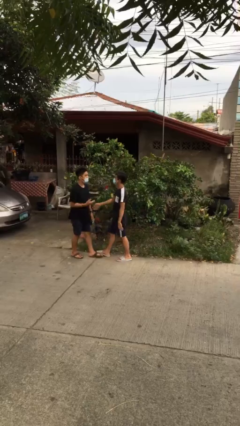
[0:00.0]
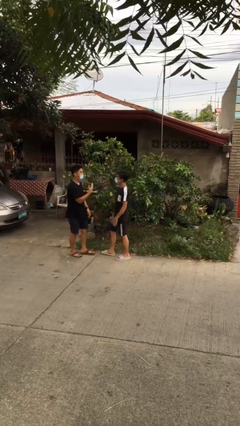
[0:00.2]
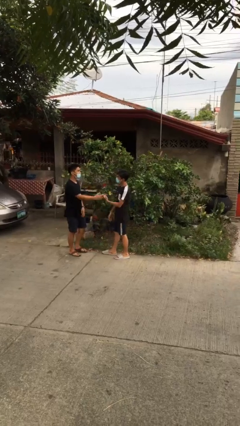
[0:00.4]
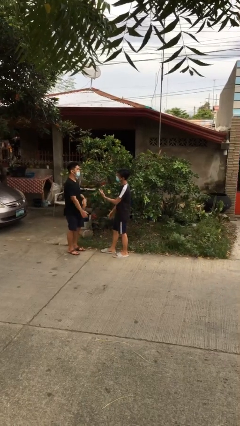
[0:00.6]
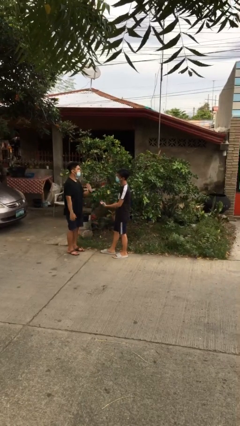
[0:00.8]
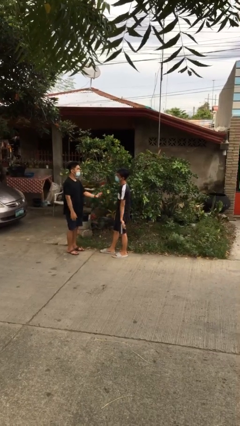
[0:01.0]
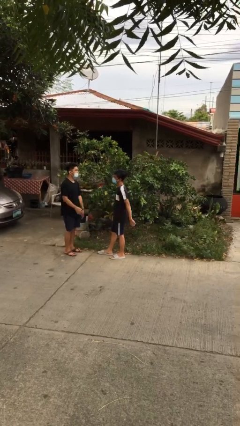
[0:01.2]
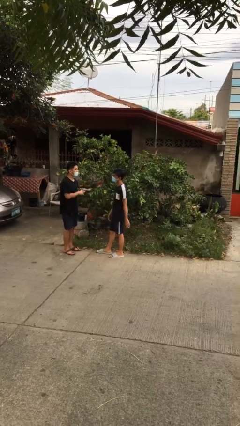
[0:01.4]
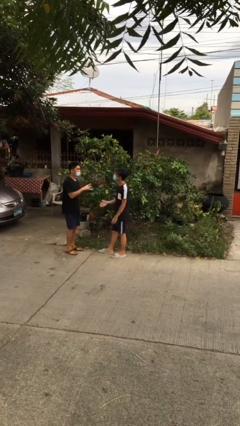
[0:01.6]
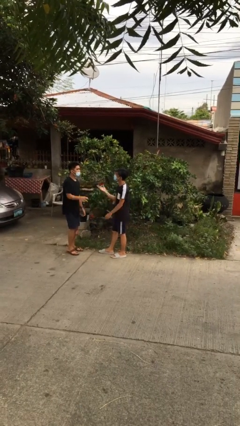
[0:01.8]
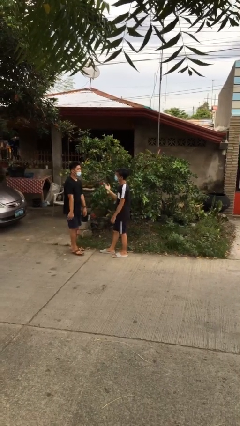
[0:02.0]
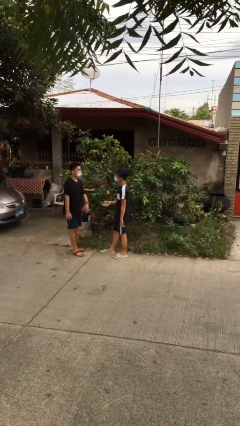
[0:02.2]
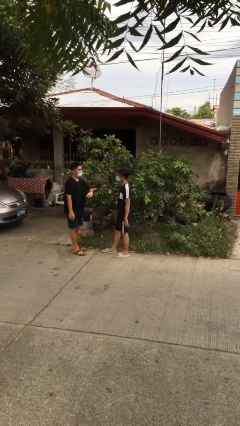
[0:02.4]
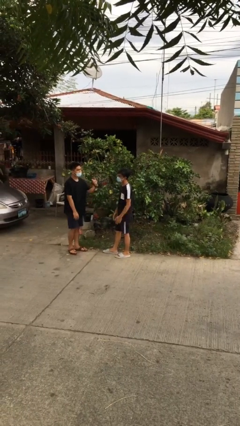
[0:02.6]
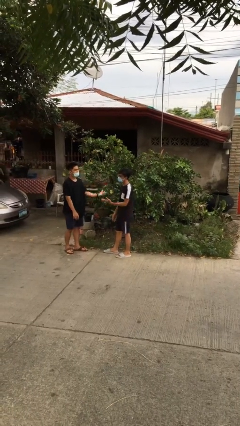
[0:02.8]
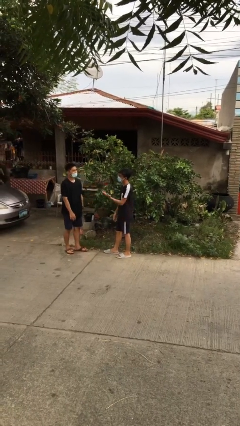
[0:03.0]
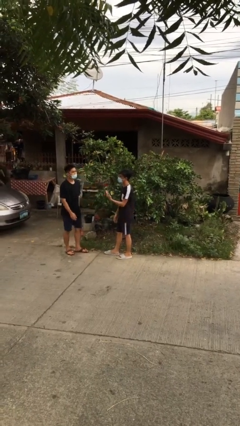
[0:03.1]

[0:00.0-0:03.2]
person talks to person

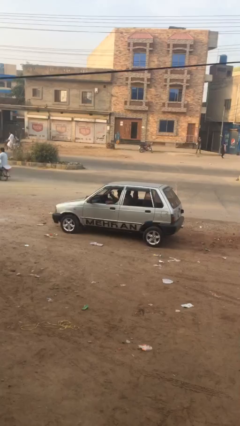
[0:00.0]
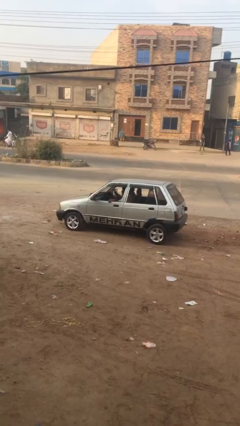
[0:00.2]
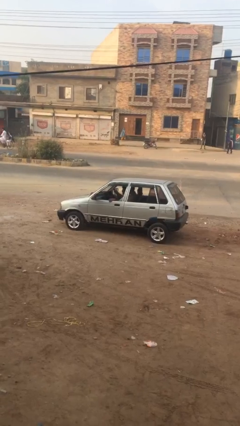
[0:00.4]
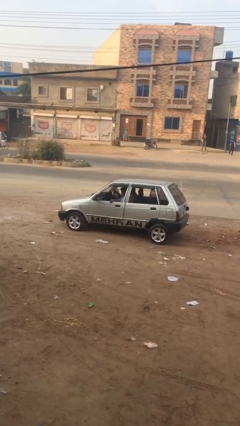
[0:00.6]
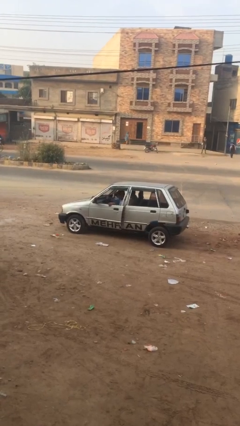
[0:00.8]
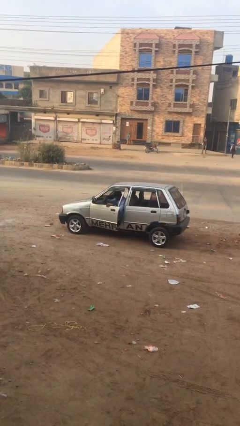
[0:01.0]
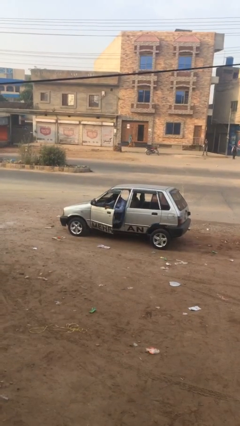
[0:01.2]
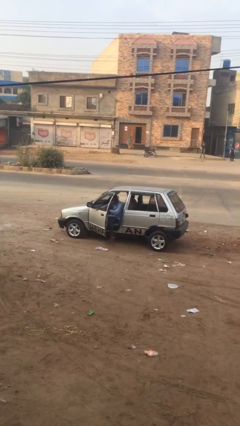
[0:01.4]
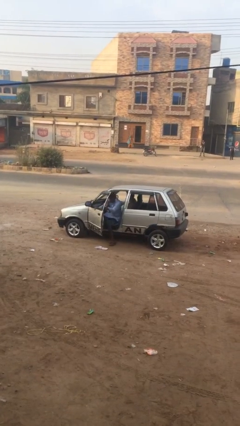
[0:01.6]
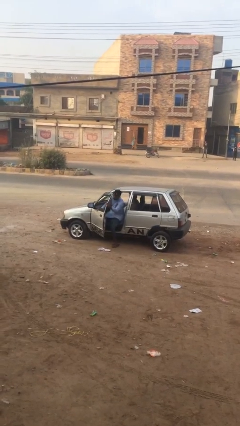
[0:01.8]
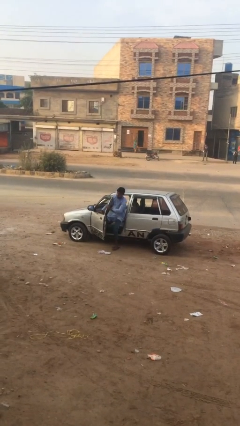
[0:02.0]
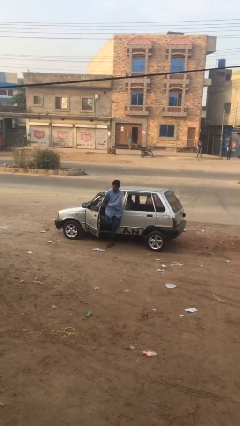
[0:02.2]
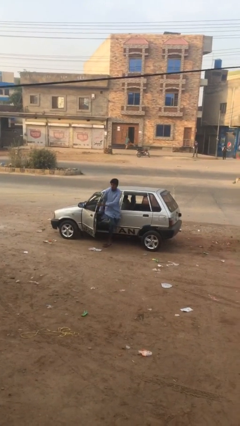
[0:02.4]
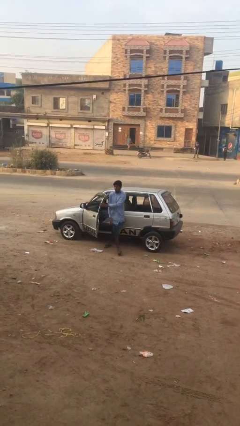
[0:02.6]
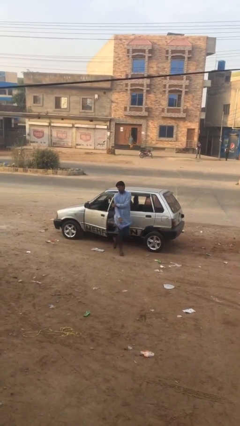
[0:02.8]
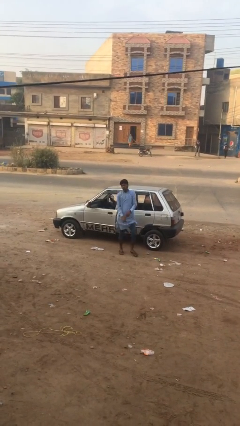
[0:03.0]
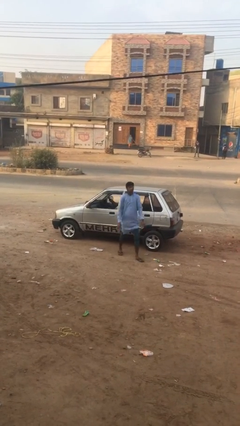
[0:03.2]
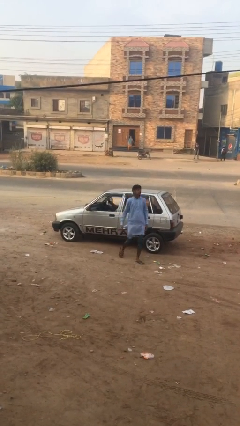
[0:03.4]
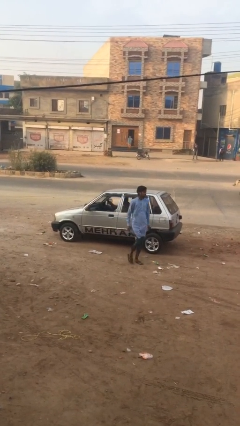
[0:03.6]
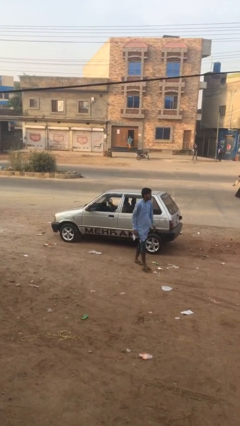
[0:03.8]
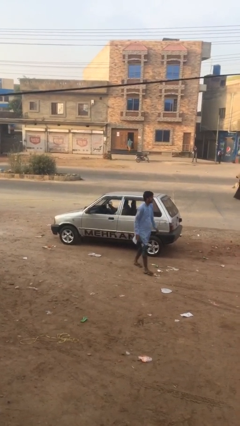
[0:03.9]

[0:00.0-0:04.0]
car drops off person

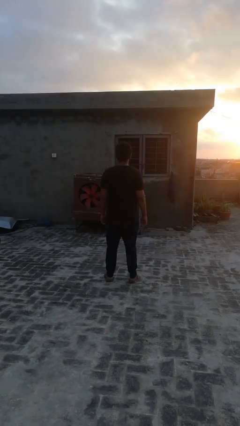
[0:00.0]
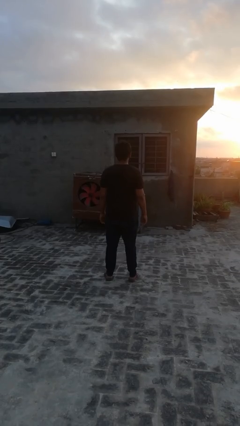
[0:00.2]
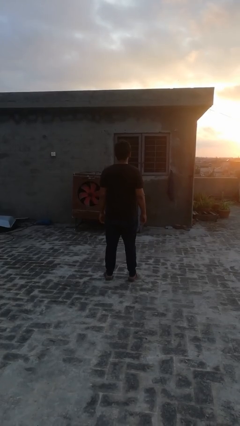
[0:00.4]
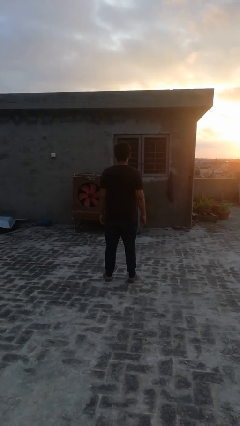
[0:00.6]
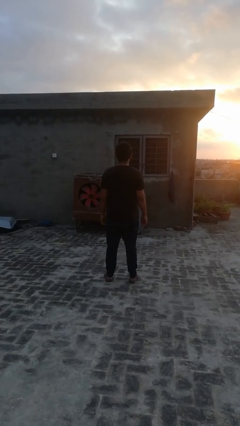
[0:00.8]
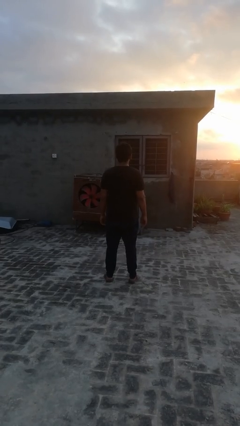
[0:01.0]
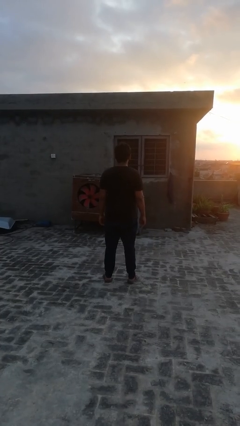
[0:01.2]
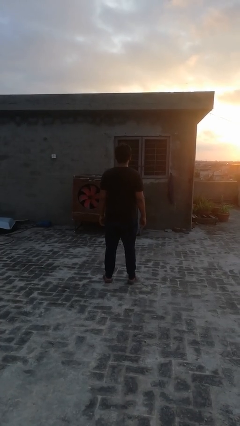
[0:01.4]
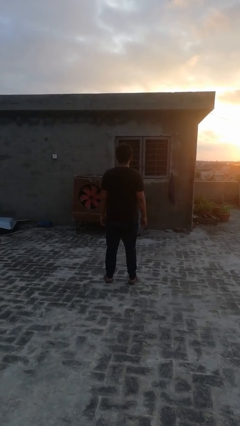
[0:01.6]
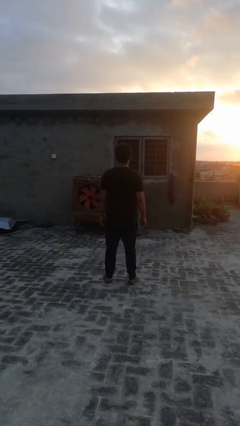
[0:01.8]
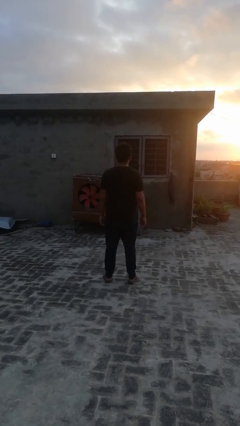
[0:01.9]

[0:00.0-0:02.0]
person gestures hang loose

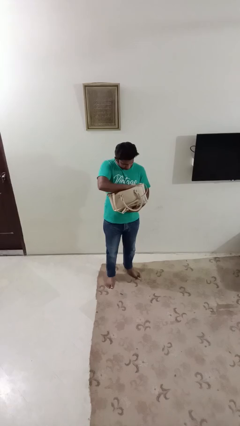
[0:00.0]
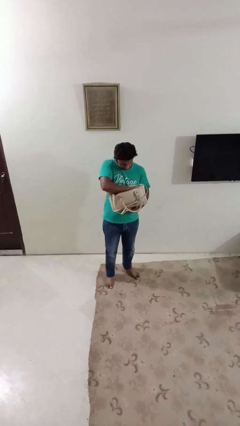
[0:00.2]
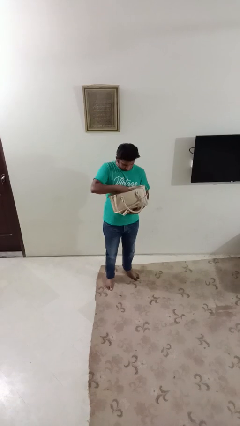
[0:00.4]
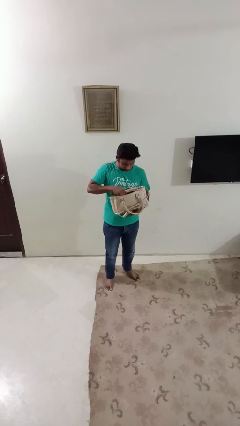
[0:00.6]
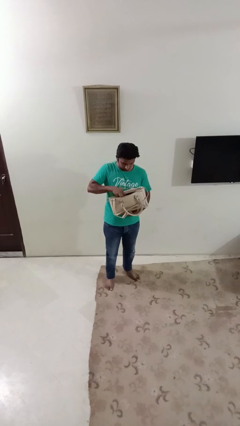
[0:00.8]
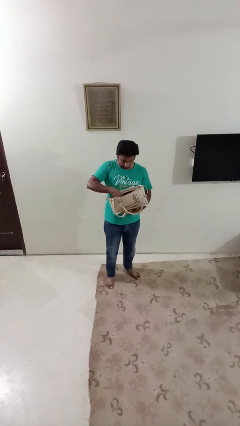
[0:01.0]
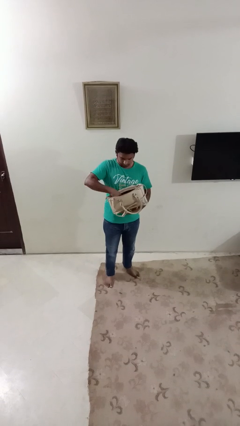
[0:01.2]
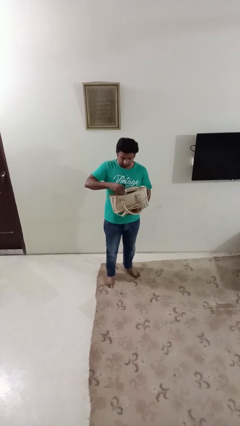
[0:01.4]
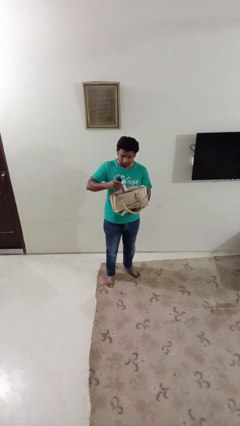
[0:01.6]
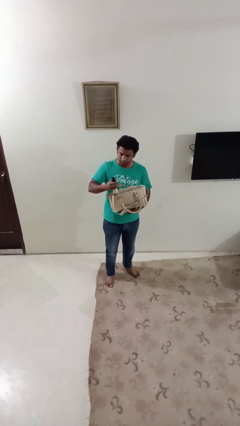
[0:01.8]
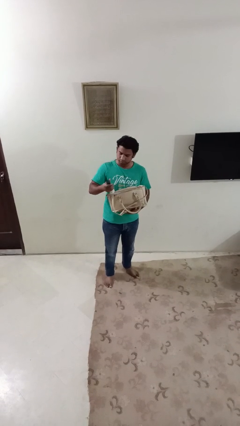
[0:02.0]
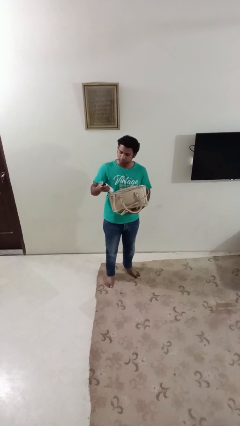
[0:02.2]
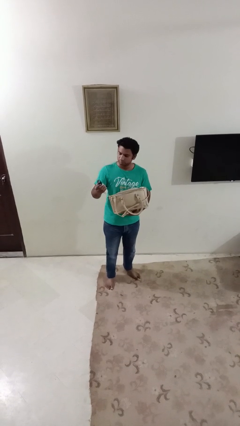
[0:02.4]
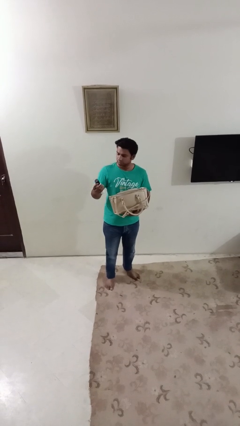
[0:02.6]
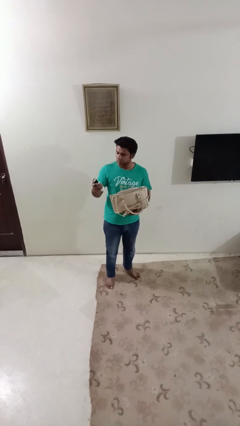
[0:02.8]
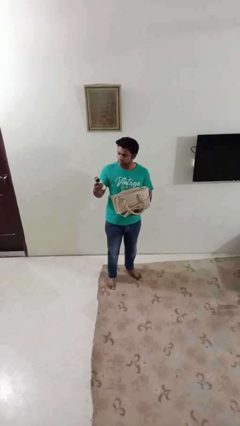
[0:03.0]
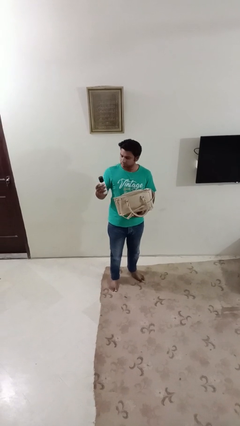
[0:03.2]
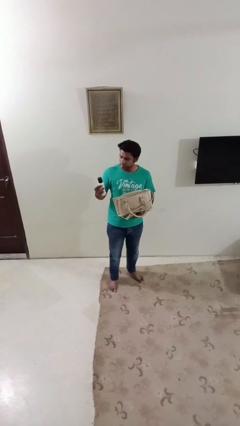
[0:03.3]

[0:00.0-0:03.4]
person takes object from purse

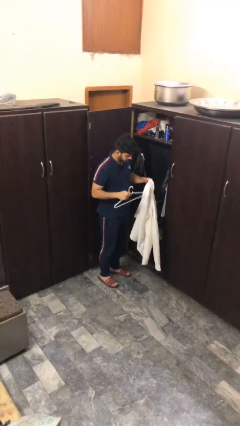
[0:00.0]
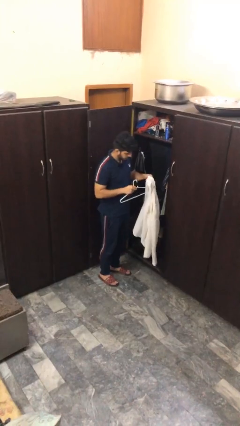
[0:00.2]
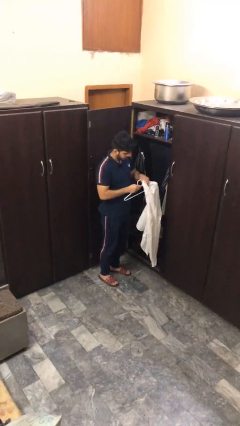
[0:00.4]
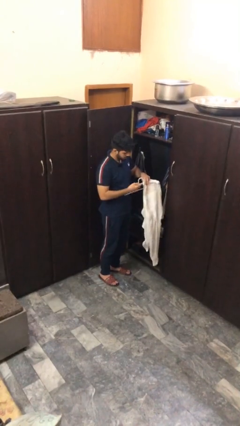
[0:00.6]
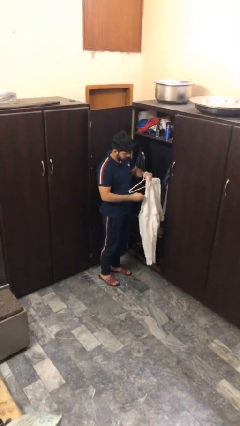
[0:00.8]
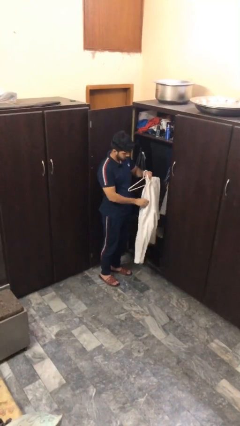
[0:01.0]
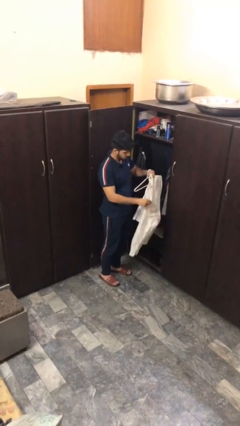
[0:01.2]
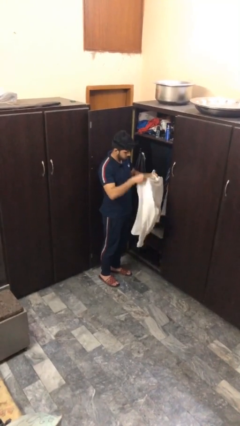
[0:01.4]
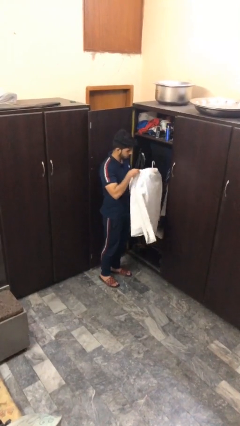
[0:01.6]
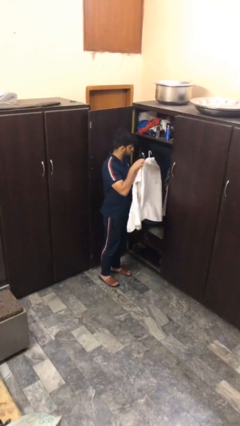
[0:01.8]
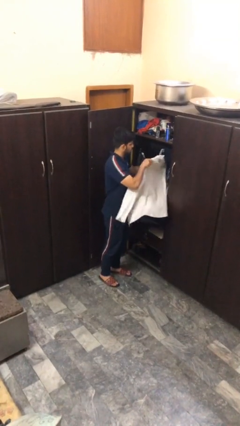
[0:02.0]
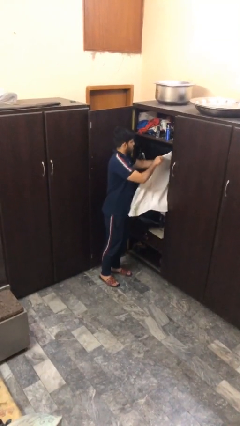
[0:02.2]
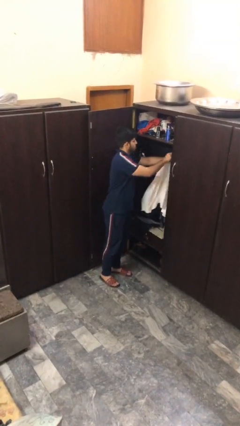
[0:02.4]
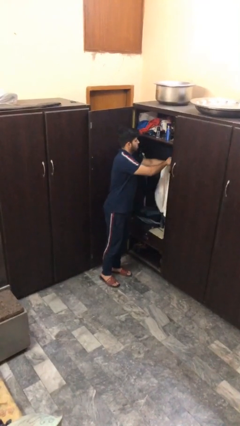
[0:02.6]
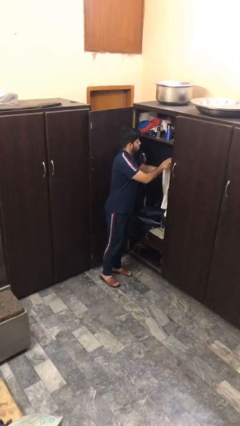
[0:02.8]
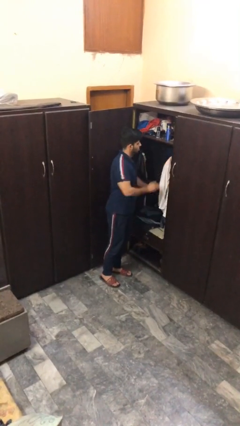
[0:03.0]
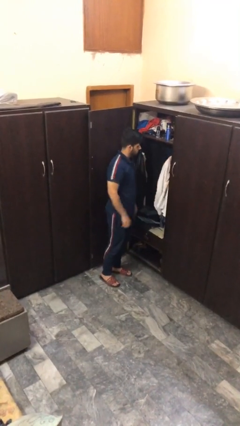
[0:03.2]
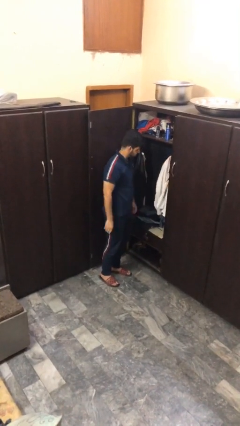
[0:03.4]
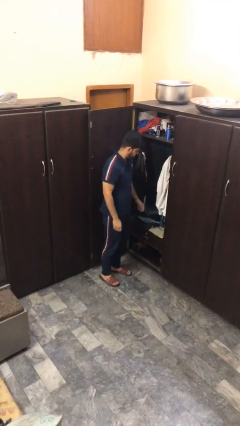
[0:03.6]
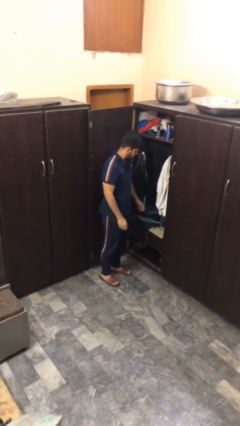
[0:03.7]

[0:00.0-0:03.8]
person puts clothes into closet

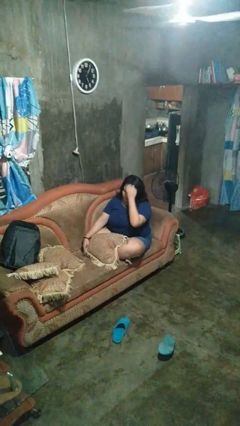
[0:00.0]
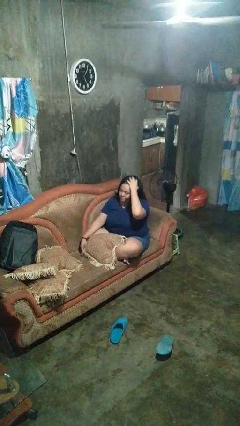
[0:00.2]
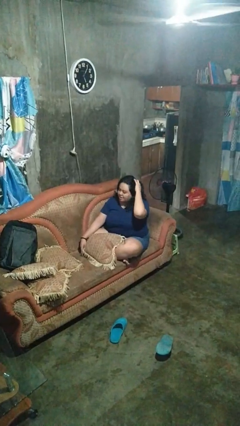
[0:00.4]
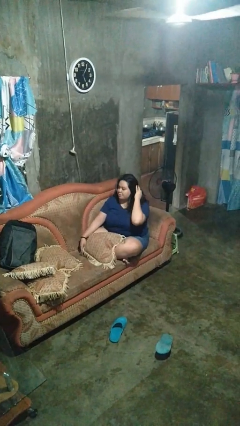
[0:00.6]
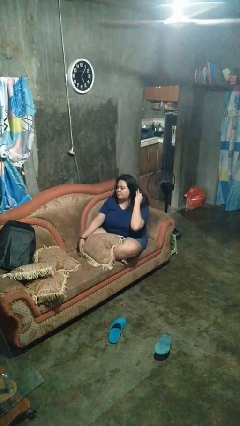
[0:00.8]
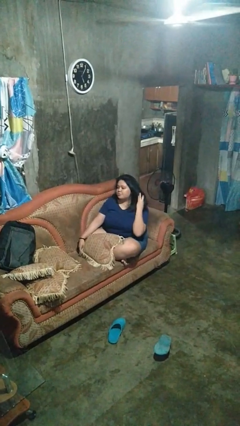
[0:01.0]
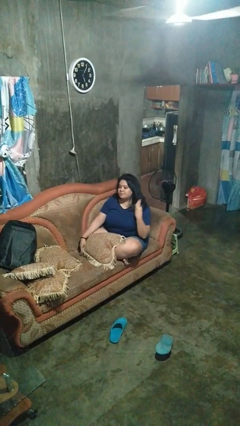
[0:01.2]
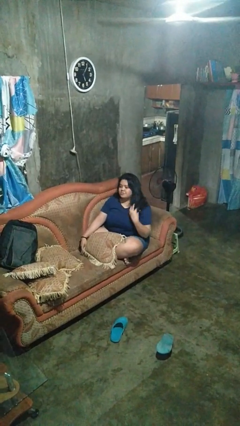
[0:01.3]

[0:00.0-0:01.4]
person strokes hair
